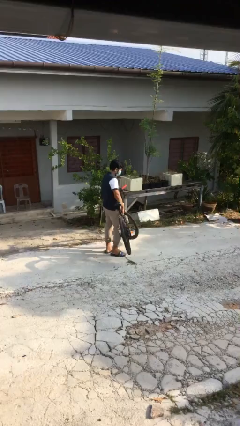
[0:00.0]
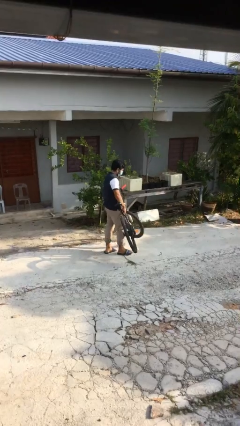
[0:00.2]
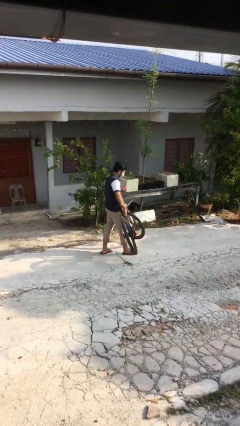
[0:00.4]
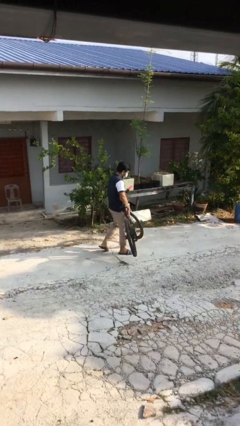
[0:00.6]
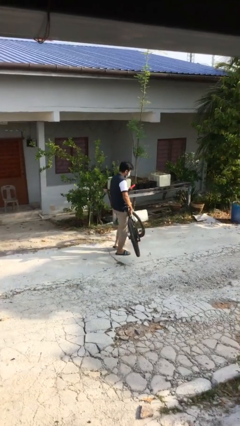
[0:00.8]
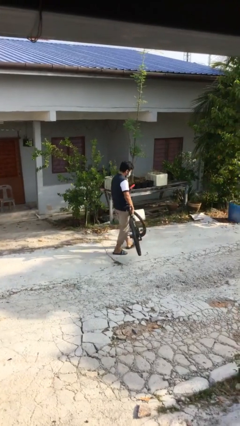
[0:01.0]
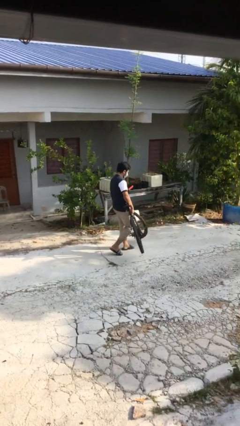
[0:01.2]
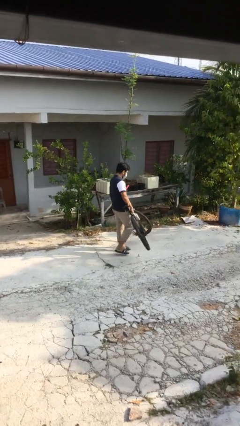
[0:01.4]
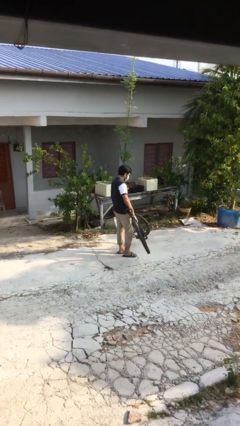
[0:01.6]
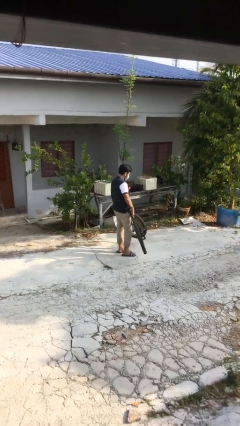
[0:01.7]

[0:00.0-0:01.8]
person carries bicycle

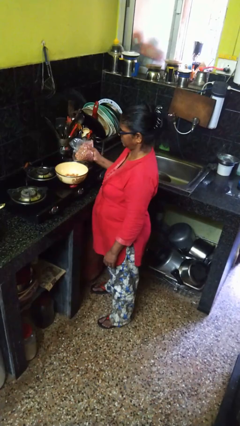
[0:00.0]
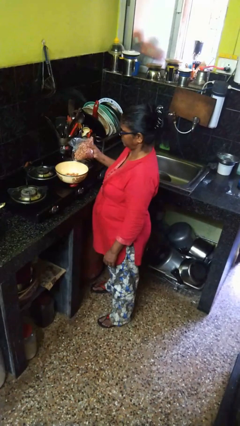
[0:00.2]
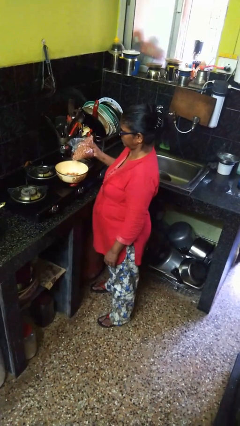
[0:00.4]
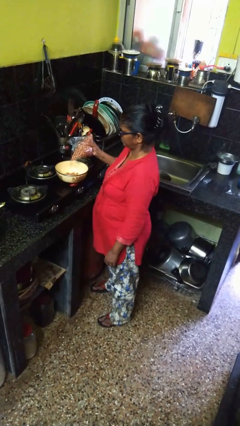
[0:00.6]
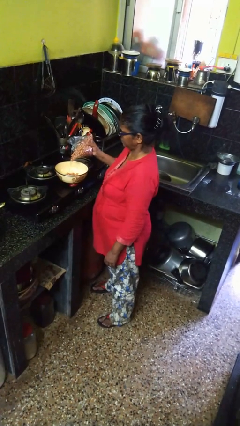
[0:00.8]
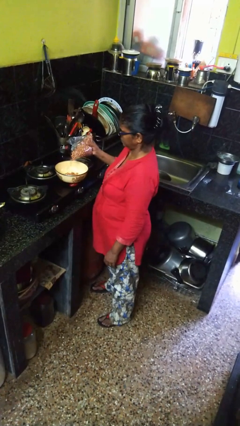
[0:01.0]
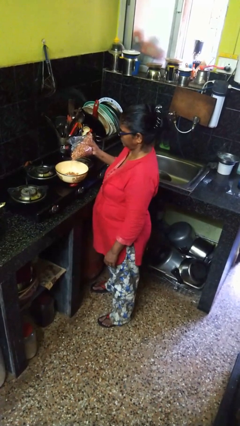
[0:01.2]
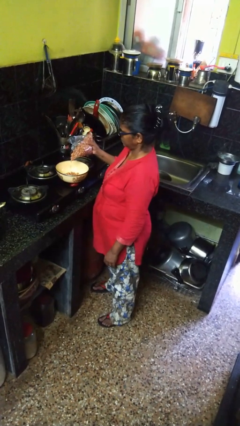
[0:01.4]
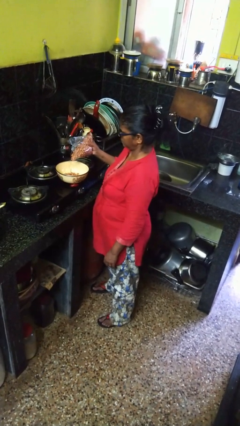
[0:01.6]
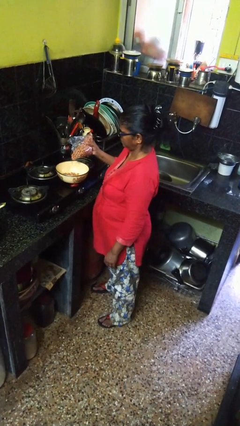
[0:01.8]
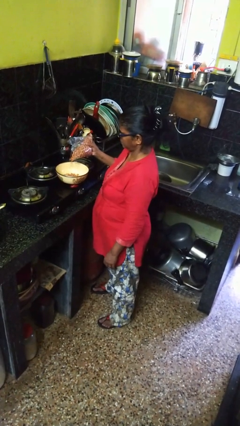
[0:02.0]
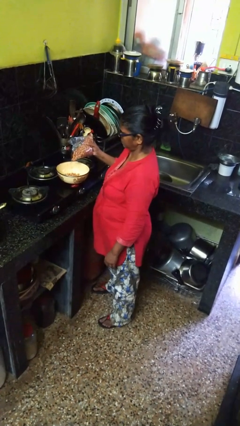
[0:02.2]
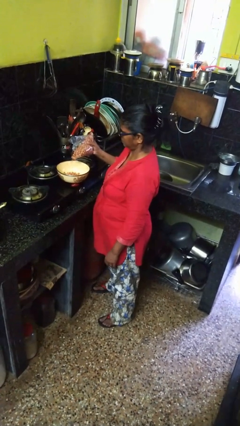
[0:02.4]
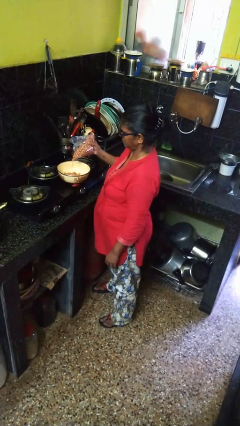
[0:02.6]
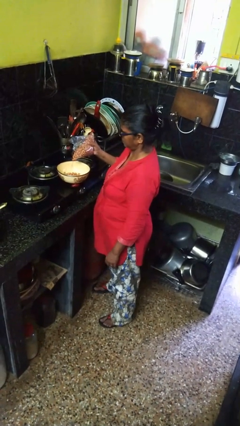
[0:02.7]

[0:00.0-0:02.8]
person pours into bowl

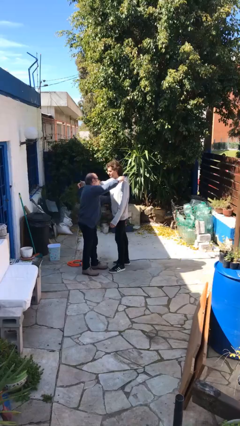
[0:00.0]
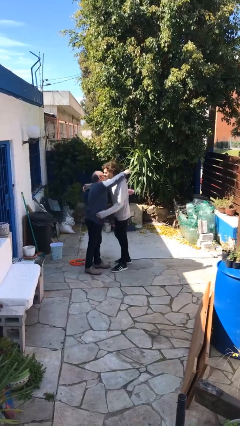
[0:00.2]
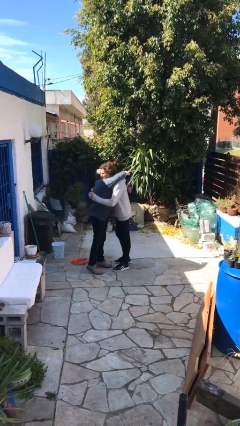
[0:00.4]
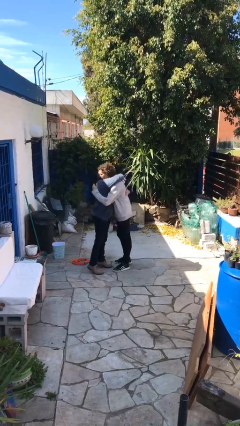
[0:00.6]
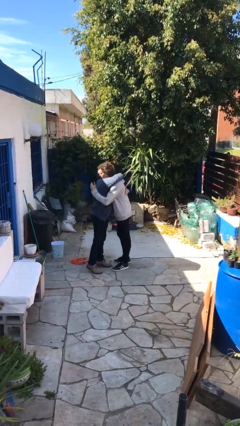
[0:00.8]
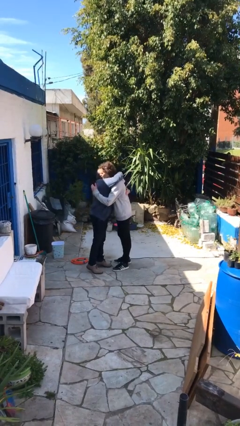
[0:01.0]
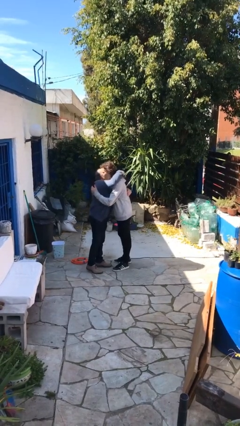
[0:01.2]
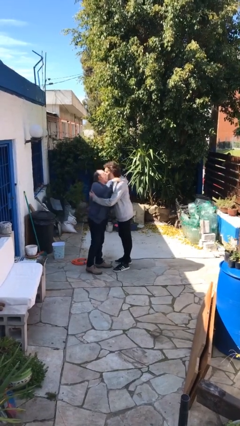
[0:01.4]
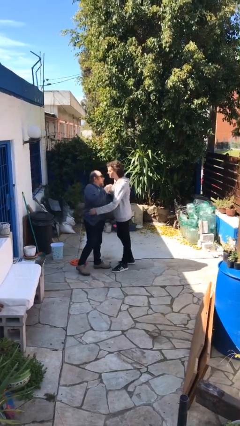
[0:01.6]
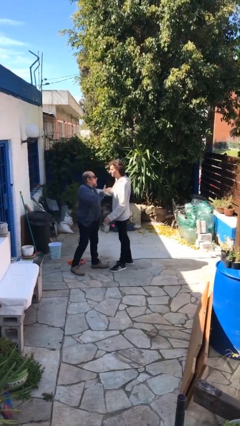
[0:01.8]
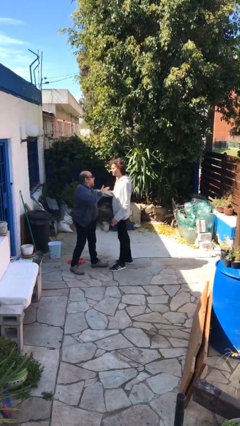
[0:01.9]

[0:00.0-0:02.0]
person embraces person

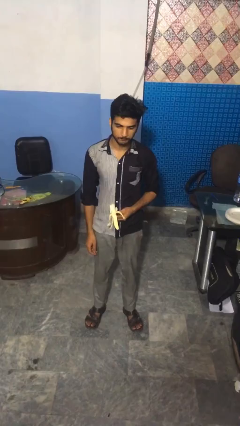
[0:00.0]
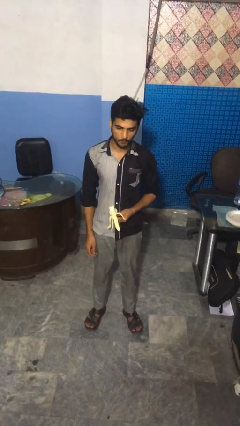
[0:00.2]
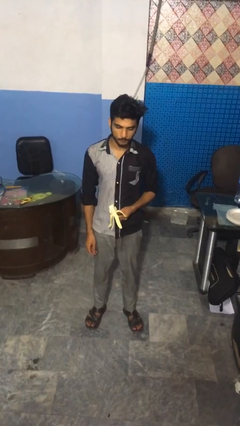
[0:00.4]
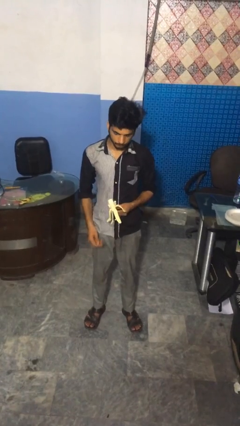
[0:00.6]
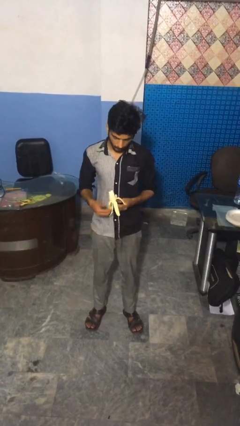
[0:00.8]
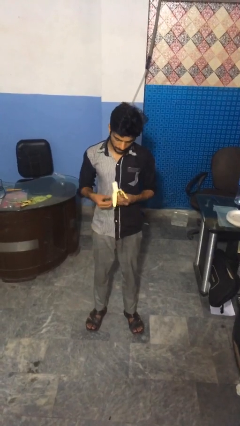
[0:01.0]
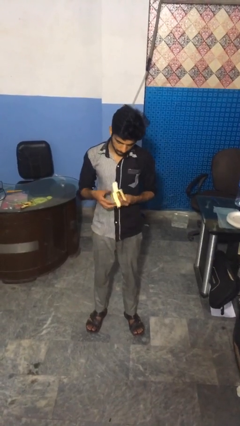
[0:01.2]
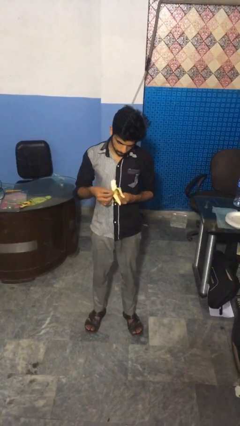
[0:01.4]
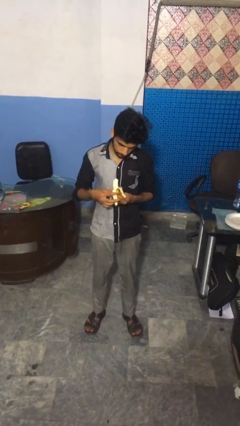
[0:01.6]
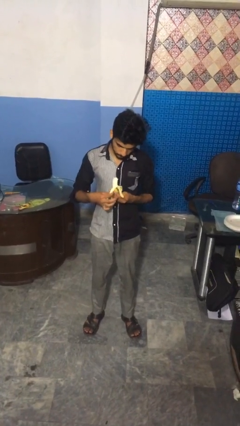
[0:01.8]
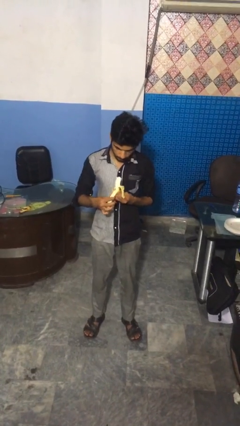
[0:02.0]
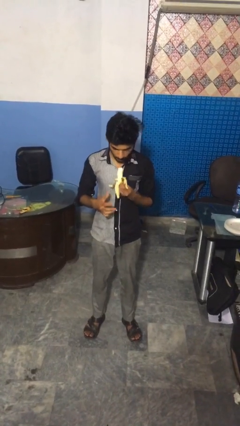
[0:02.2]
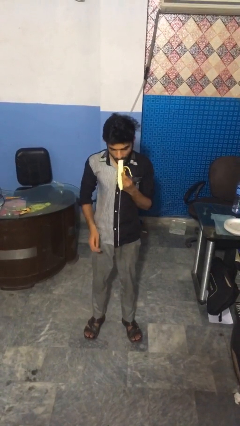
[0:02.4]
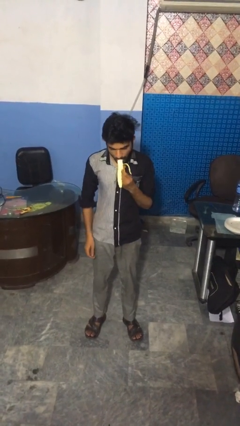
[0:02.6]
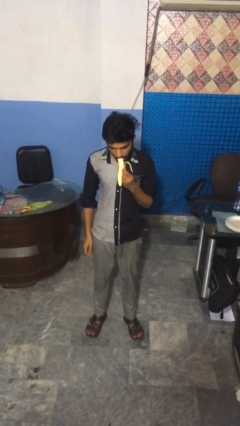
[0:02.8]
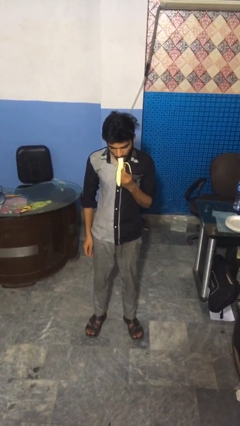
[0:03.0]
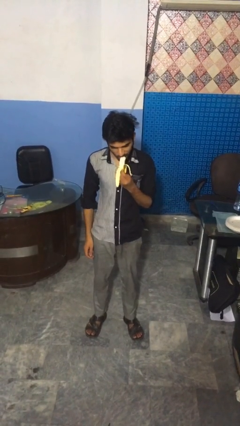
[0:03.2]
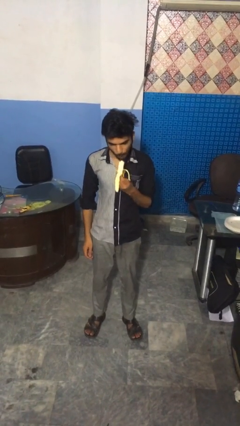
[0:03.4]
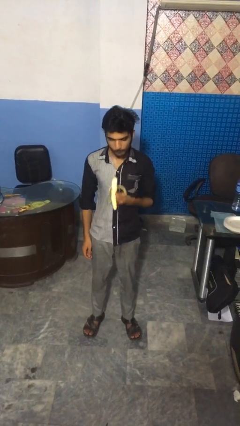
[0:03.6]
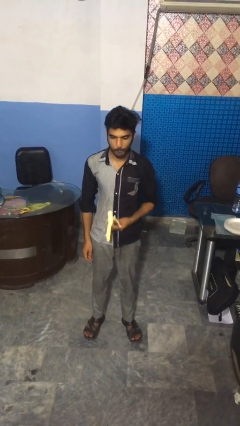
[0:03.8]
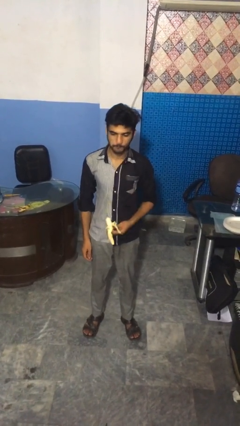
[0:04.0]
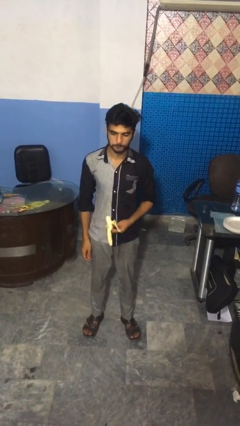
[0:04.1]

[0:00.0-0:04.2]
person eats banana

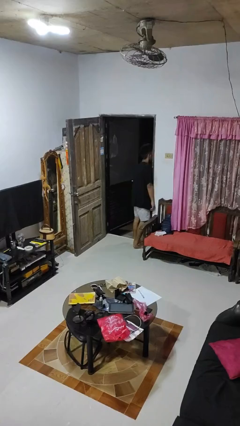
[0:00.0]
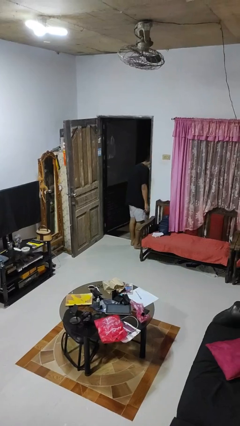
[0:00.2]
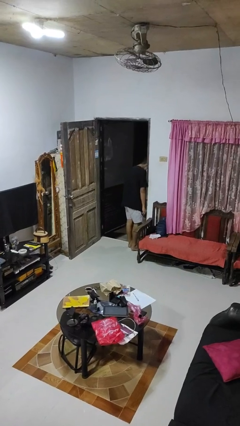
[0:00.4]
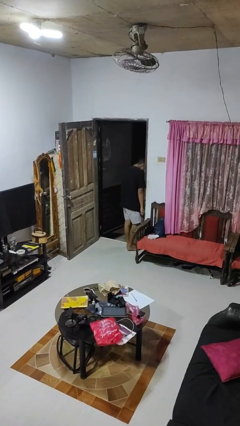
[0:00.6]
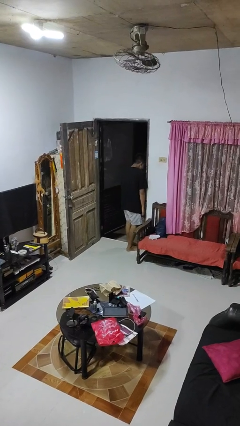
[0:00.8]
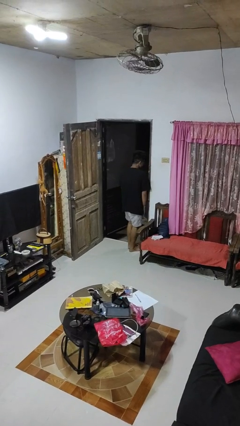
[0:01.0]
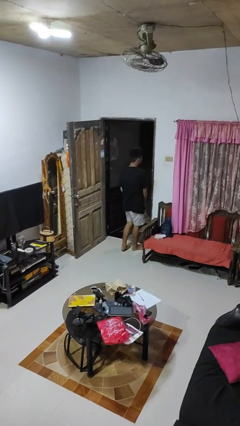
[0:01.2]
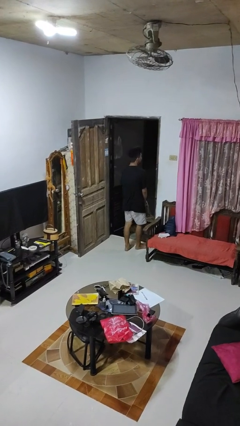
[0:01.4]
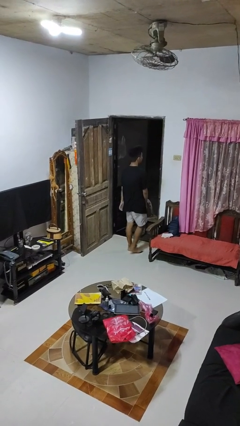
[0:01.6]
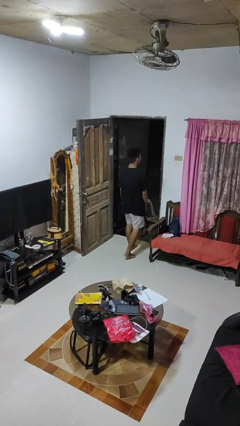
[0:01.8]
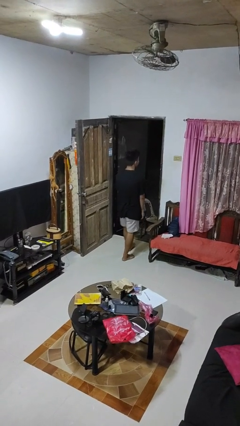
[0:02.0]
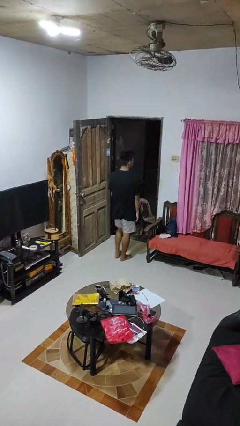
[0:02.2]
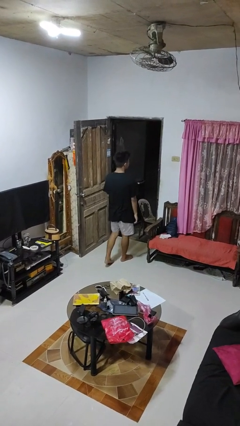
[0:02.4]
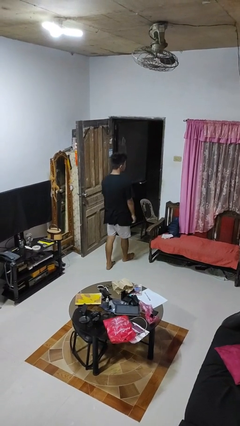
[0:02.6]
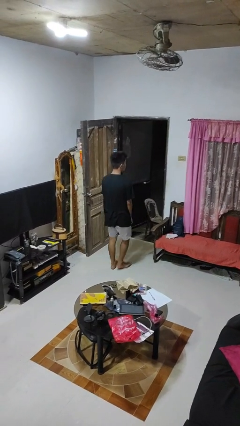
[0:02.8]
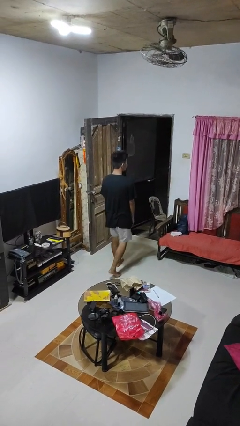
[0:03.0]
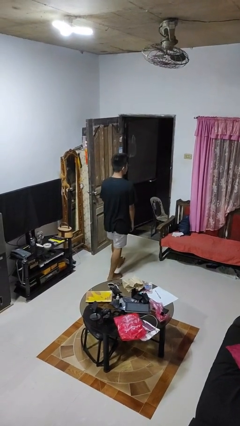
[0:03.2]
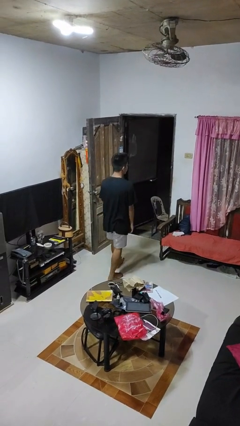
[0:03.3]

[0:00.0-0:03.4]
person bumps into wall

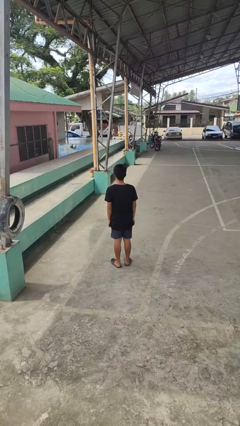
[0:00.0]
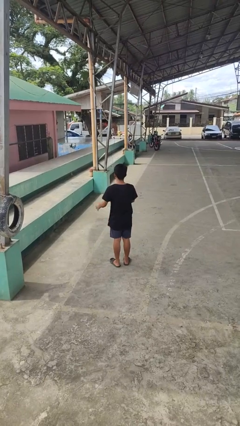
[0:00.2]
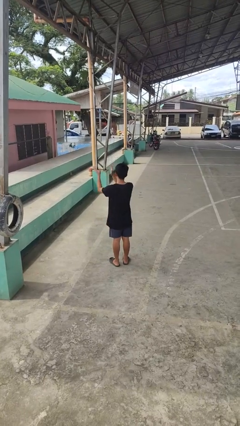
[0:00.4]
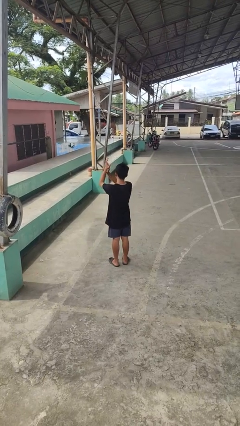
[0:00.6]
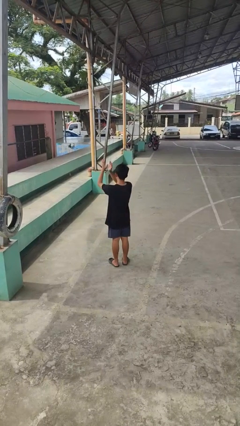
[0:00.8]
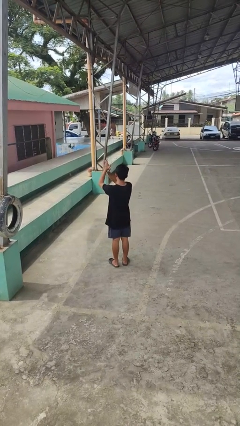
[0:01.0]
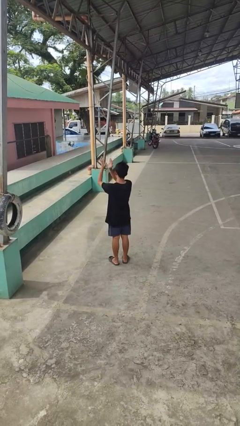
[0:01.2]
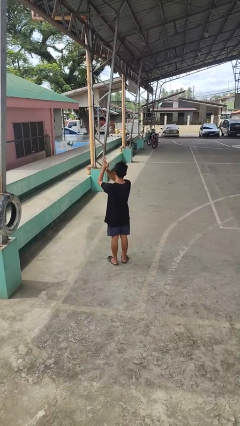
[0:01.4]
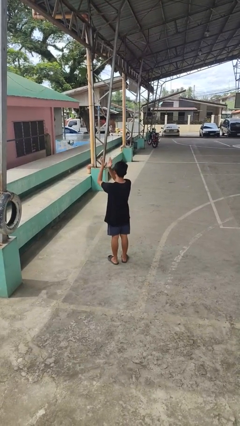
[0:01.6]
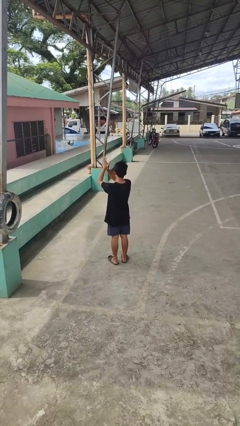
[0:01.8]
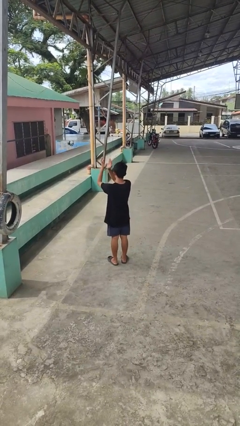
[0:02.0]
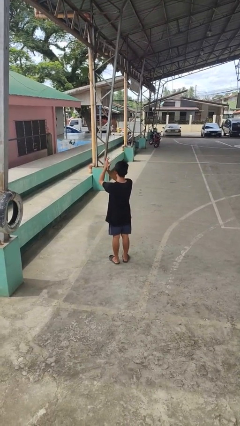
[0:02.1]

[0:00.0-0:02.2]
person claps hands

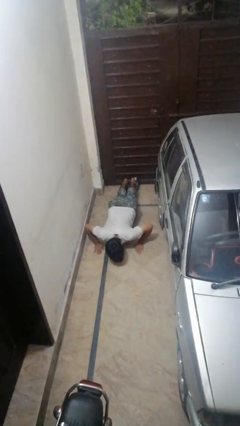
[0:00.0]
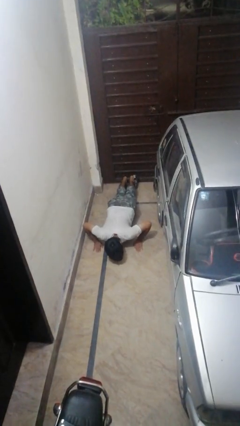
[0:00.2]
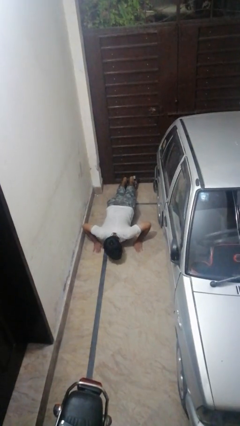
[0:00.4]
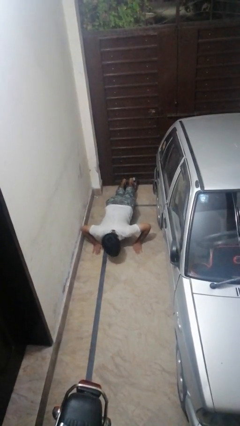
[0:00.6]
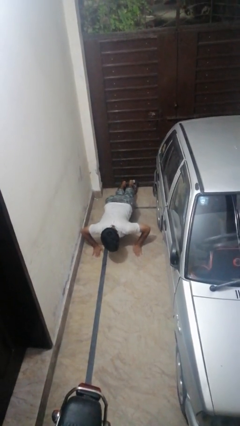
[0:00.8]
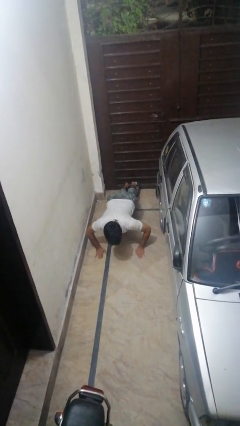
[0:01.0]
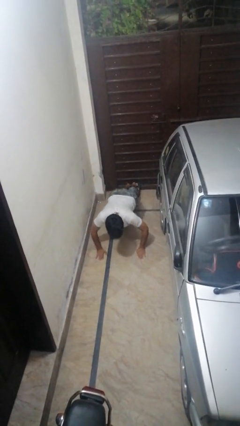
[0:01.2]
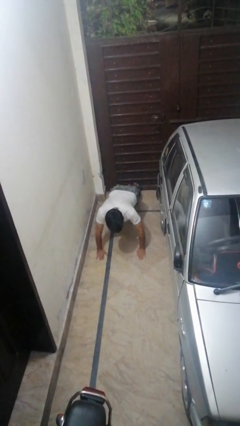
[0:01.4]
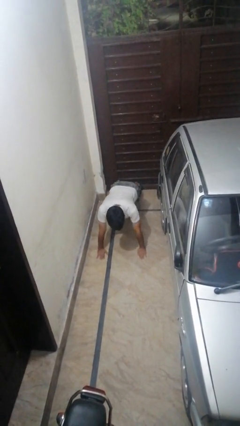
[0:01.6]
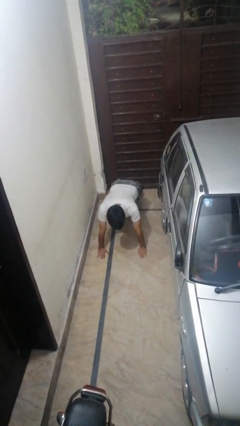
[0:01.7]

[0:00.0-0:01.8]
person exercises with pushup
